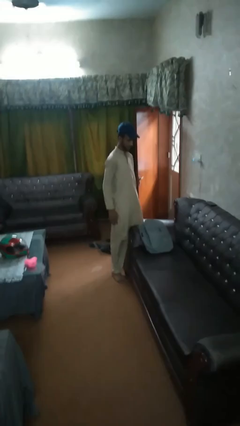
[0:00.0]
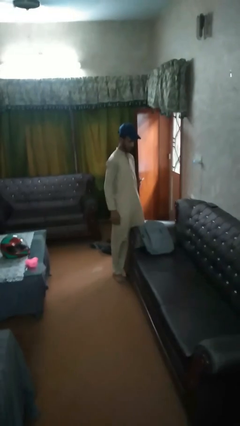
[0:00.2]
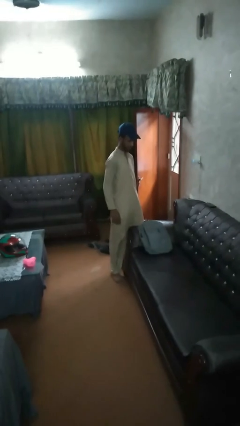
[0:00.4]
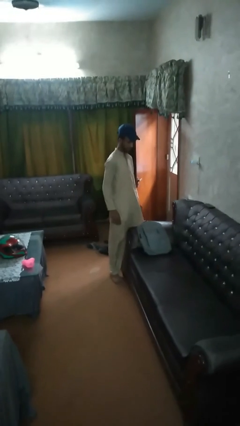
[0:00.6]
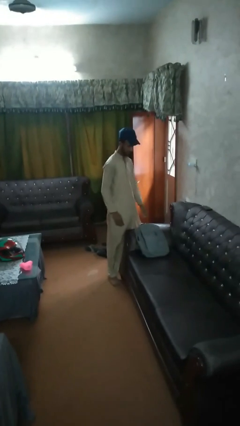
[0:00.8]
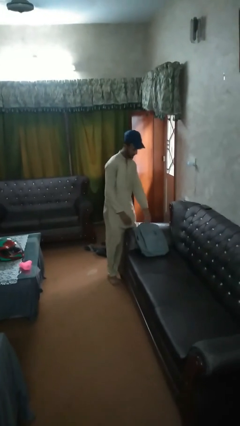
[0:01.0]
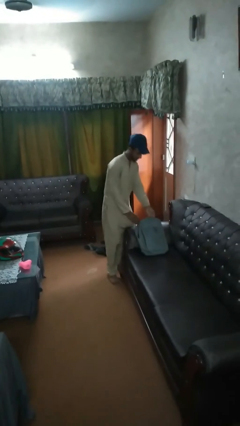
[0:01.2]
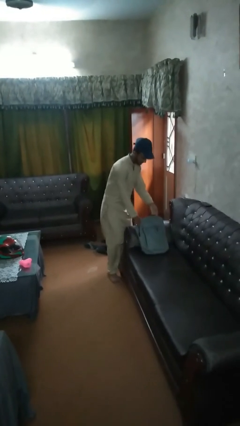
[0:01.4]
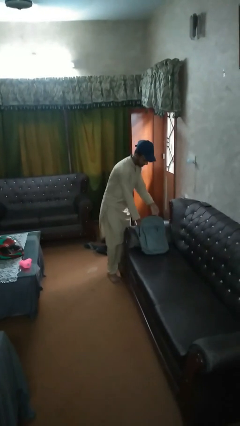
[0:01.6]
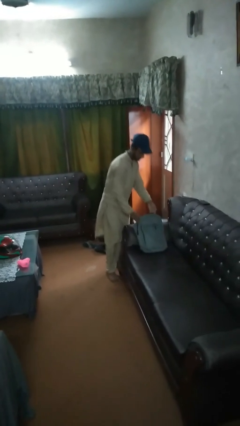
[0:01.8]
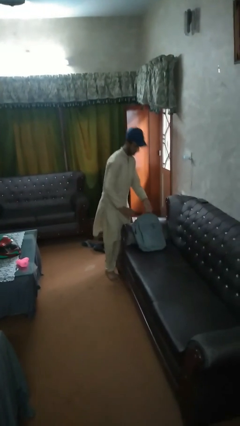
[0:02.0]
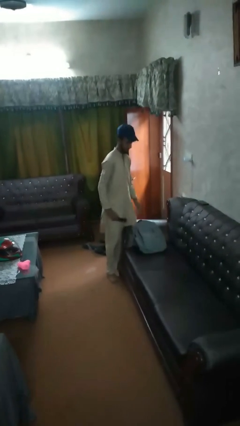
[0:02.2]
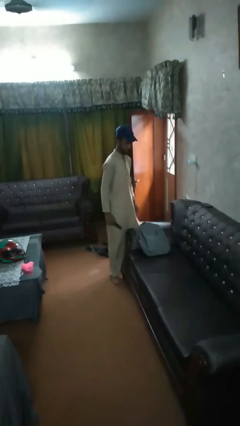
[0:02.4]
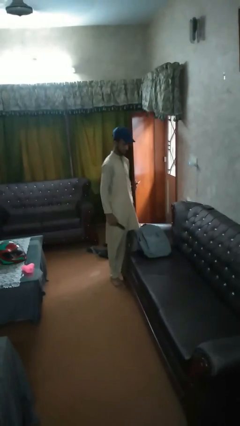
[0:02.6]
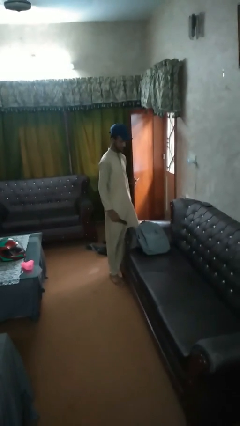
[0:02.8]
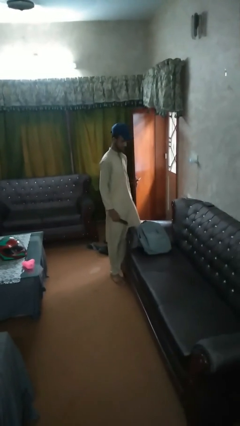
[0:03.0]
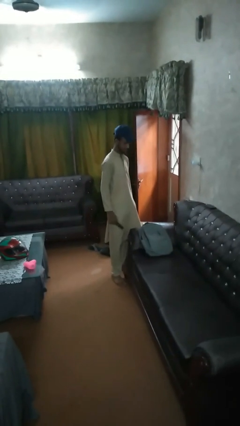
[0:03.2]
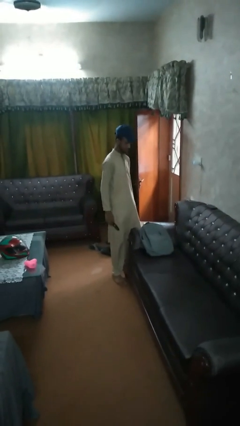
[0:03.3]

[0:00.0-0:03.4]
person takes object from bag

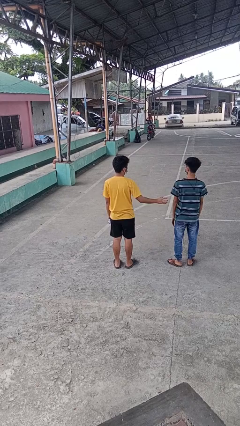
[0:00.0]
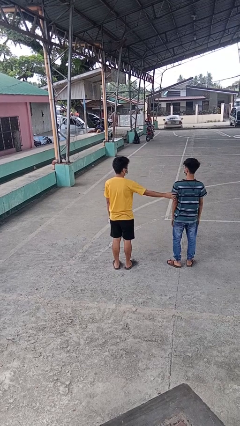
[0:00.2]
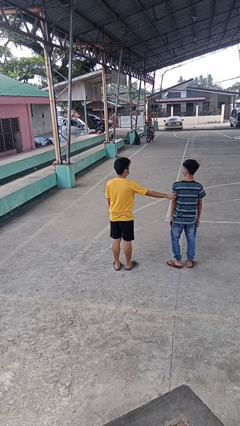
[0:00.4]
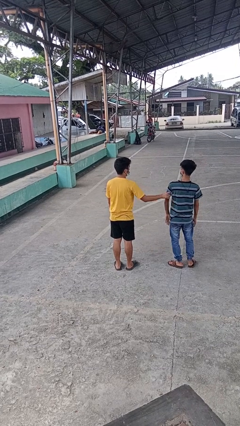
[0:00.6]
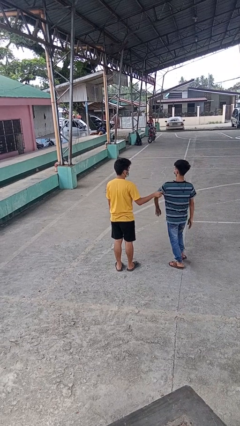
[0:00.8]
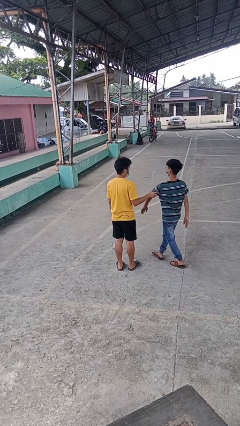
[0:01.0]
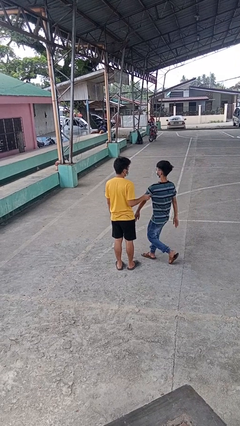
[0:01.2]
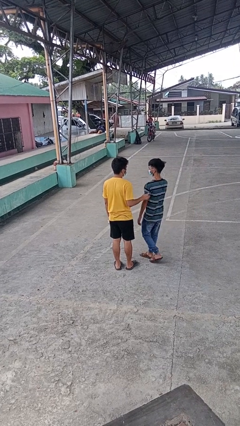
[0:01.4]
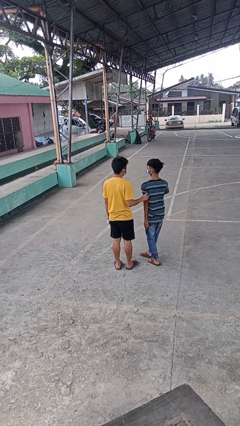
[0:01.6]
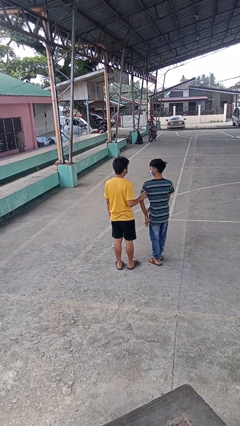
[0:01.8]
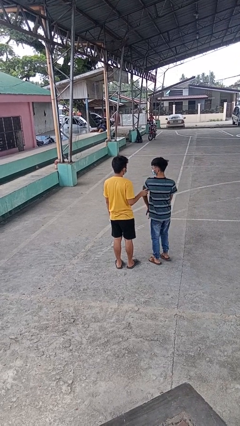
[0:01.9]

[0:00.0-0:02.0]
person grabs person by bicep

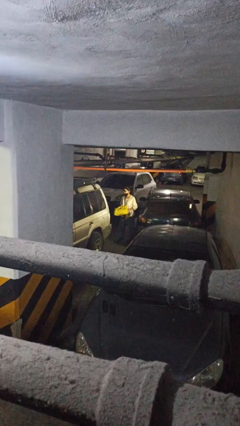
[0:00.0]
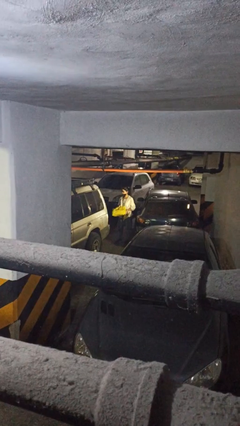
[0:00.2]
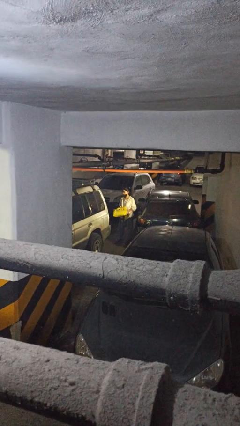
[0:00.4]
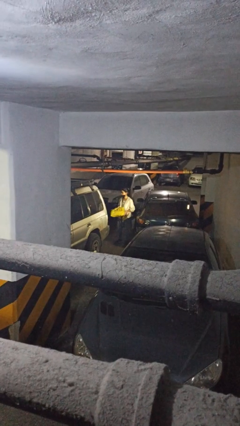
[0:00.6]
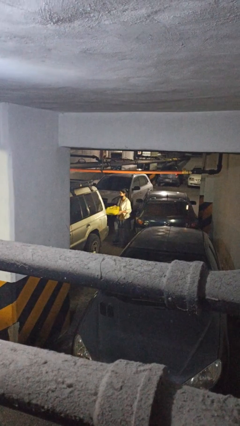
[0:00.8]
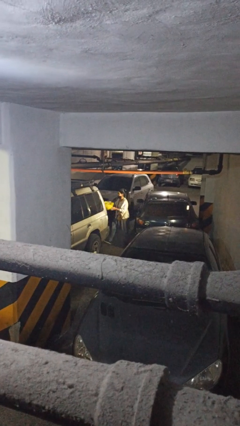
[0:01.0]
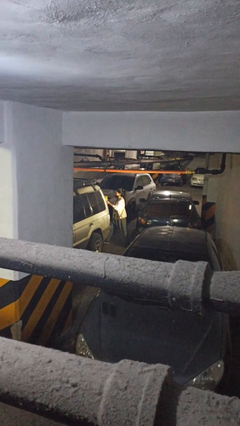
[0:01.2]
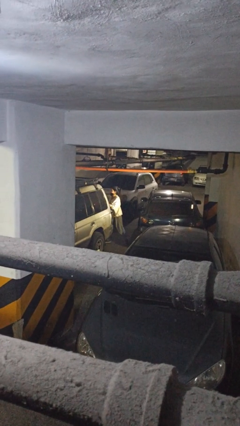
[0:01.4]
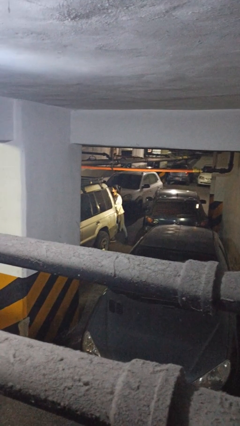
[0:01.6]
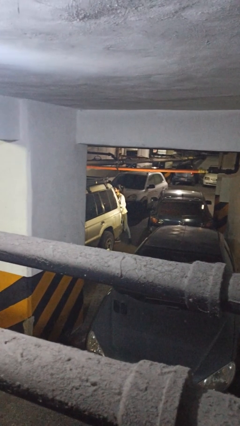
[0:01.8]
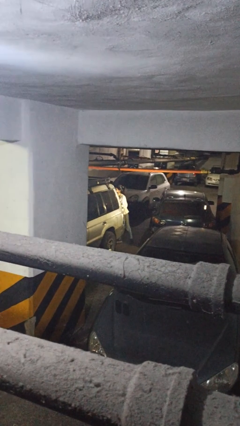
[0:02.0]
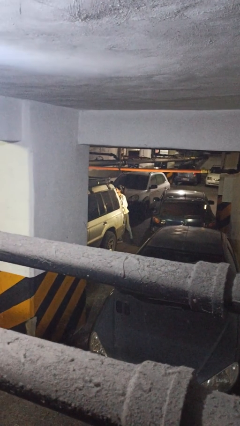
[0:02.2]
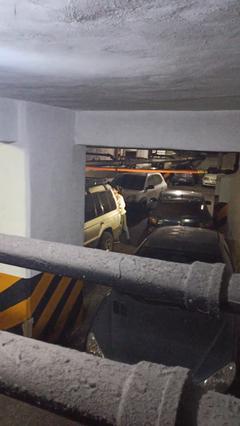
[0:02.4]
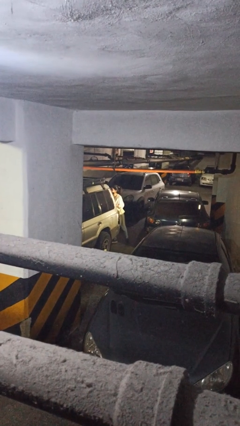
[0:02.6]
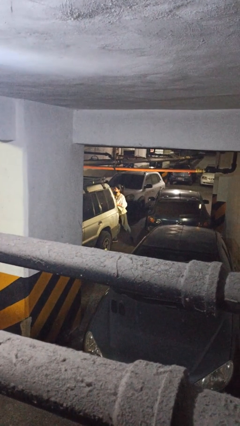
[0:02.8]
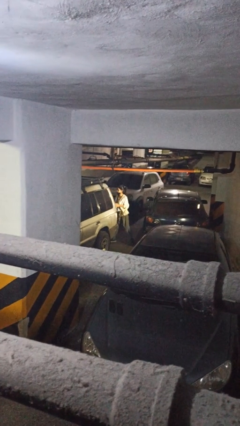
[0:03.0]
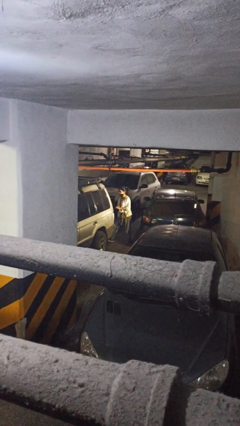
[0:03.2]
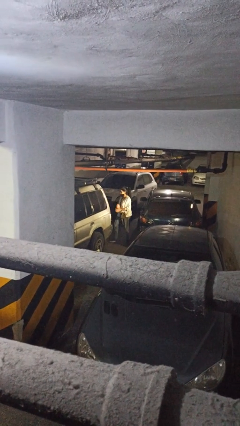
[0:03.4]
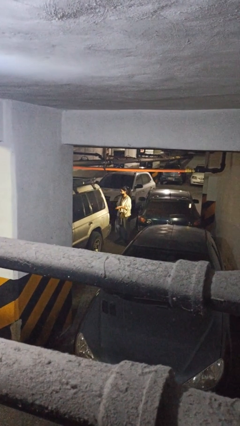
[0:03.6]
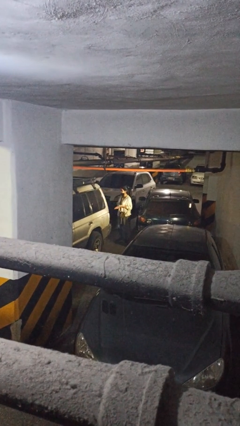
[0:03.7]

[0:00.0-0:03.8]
person loads car

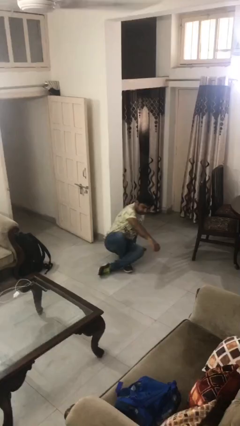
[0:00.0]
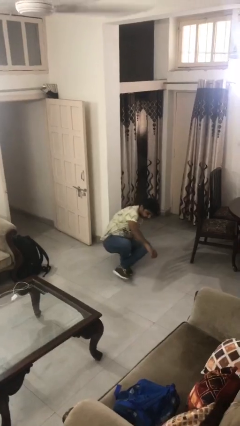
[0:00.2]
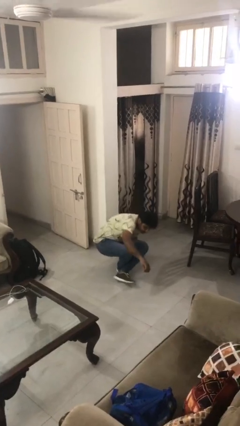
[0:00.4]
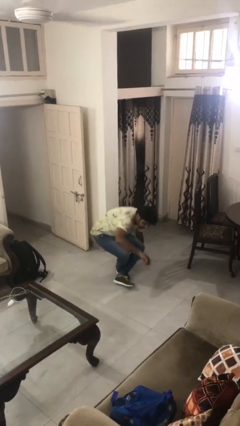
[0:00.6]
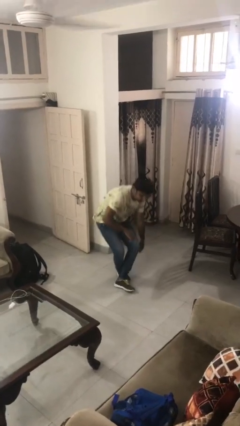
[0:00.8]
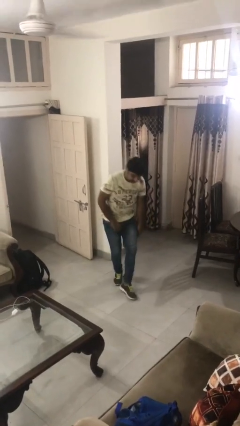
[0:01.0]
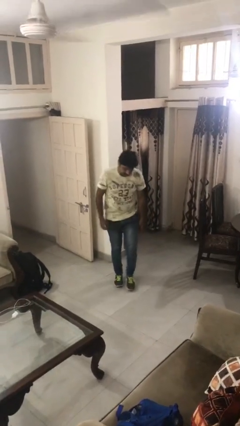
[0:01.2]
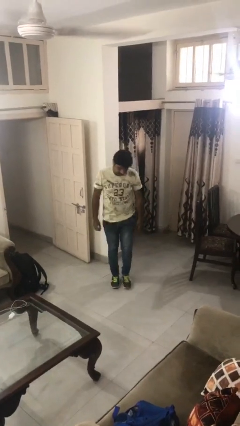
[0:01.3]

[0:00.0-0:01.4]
person stands up from floor

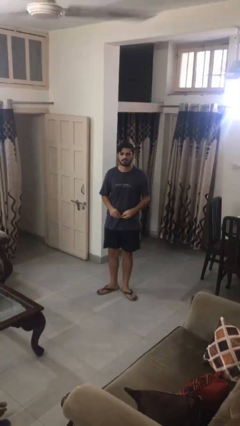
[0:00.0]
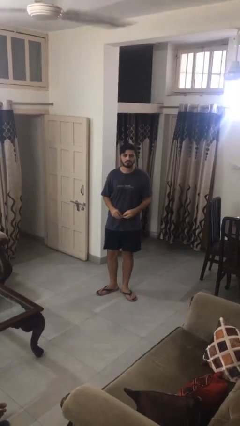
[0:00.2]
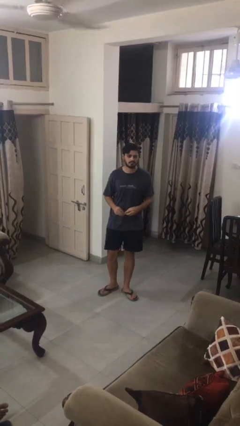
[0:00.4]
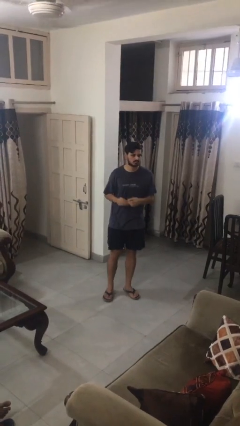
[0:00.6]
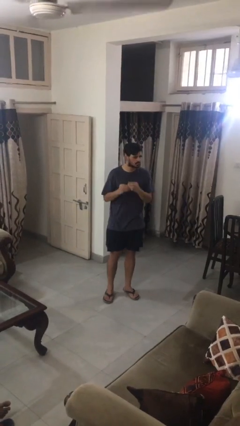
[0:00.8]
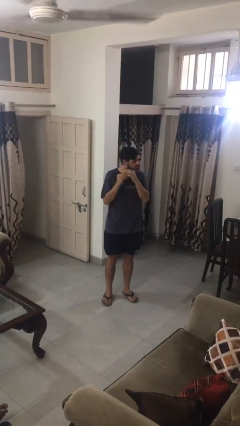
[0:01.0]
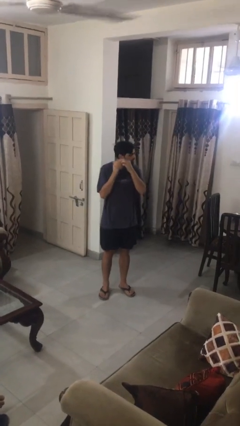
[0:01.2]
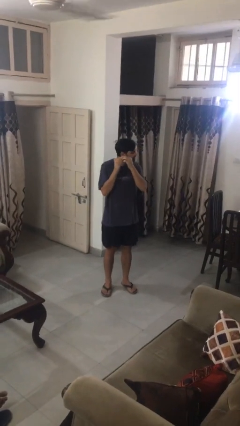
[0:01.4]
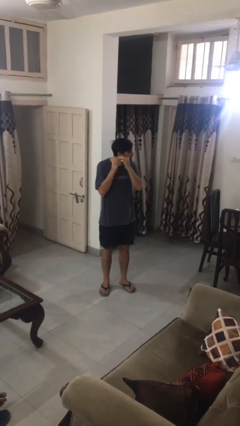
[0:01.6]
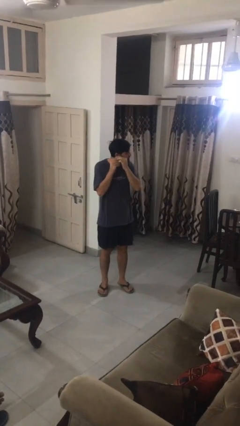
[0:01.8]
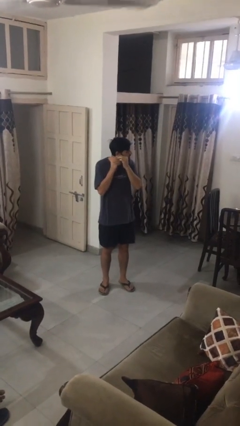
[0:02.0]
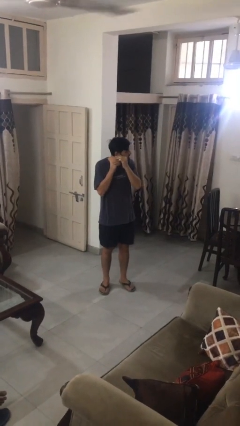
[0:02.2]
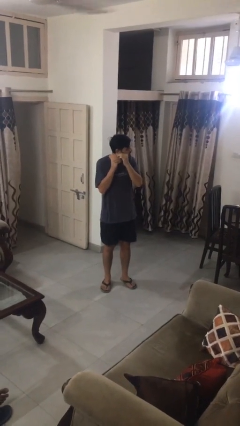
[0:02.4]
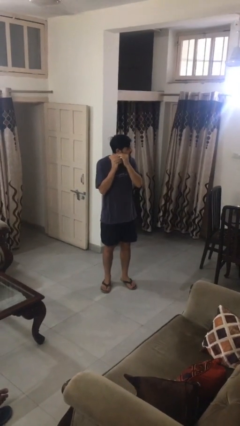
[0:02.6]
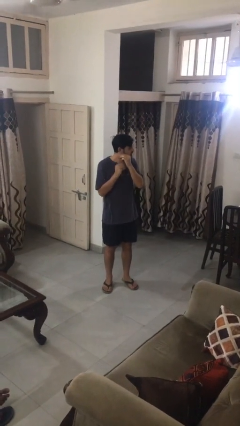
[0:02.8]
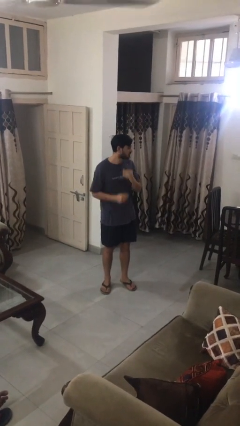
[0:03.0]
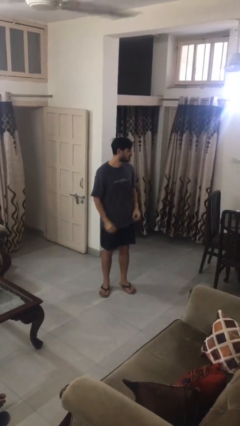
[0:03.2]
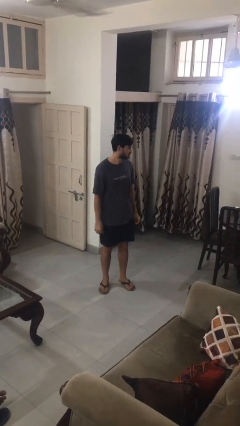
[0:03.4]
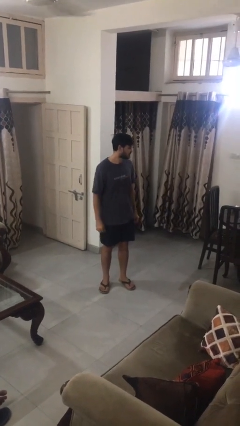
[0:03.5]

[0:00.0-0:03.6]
person puts on earrings

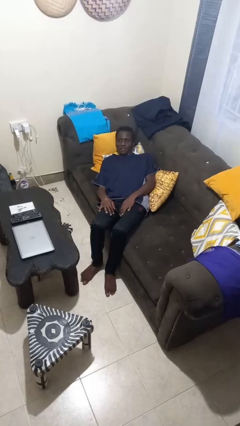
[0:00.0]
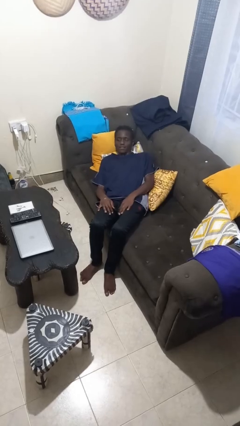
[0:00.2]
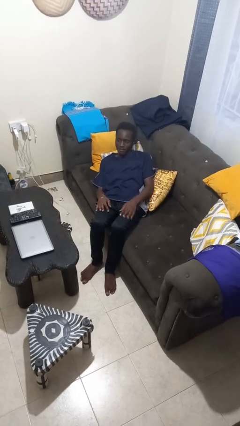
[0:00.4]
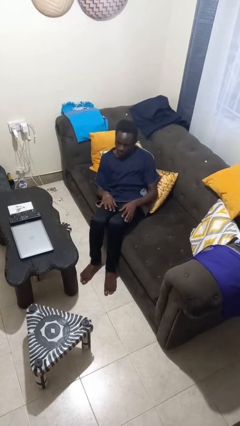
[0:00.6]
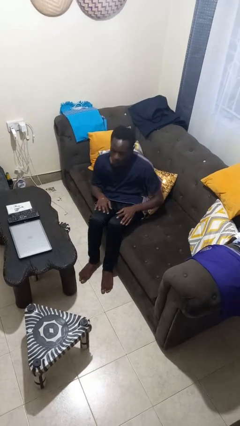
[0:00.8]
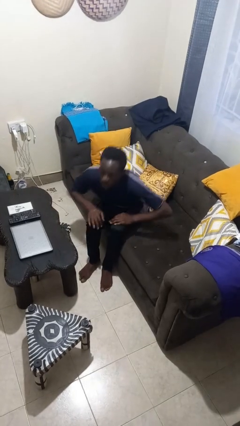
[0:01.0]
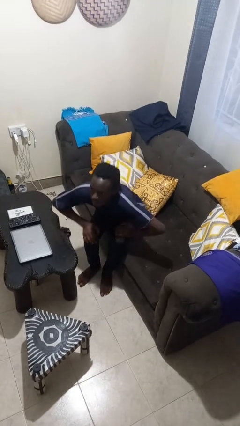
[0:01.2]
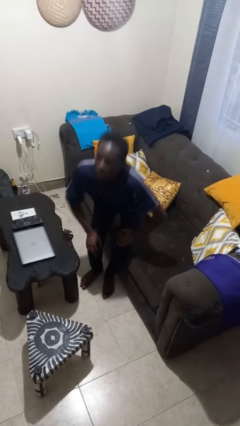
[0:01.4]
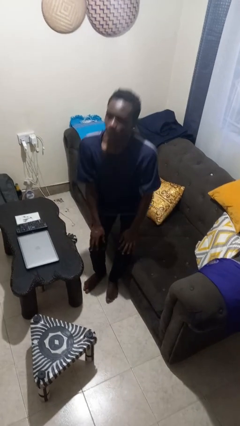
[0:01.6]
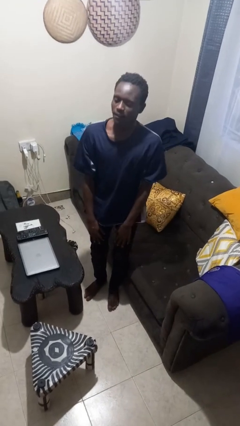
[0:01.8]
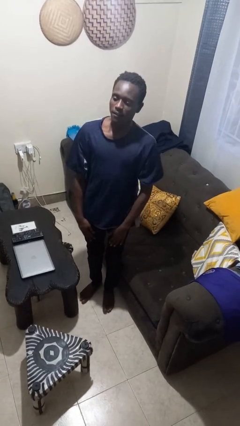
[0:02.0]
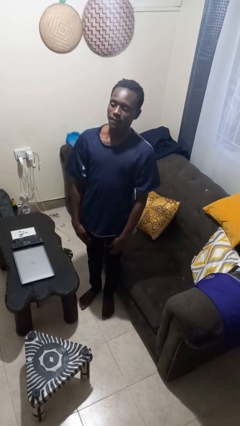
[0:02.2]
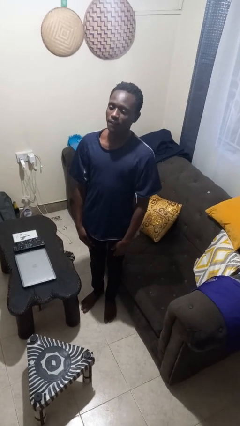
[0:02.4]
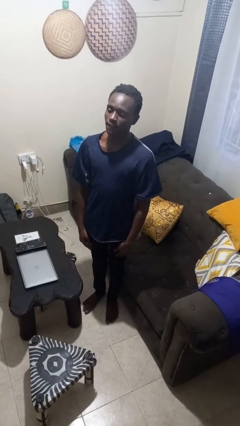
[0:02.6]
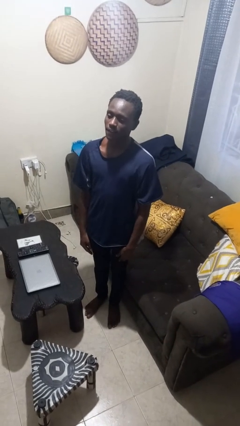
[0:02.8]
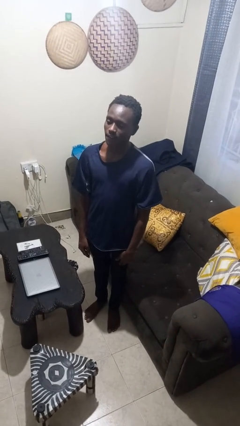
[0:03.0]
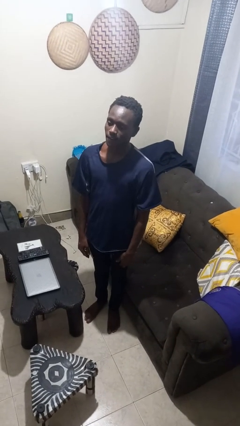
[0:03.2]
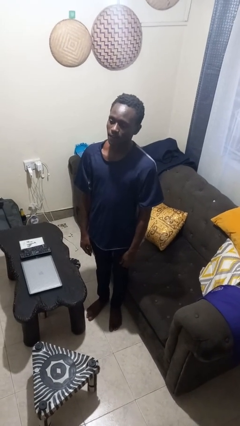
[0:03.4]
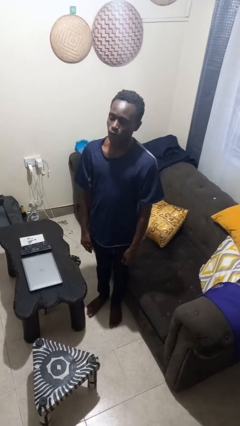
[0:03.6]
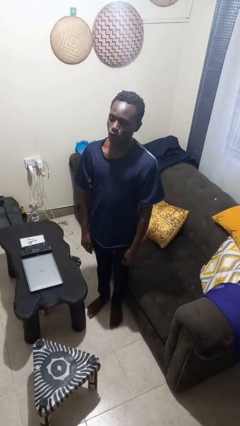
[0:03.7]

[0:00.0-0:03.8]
person stands up
